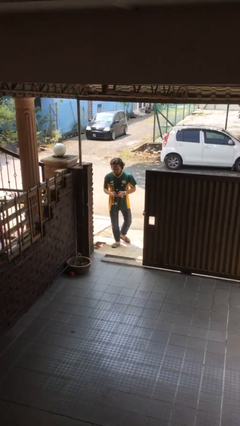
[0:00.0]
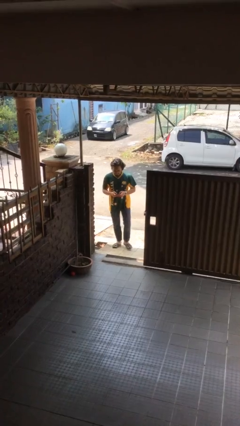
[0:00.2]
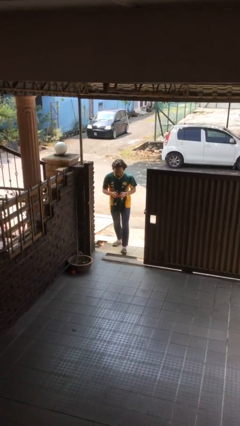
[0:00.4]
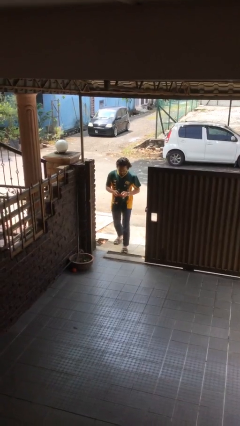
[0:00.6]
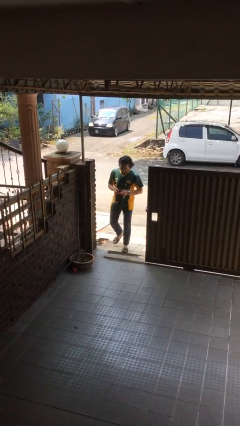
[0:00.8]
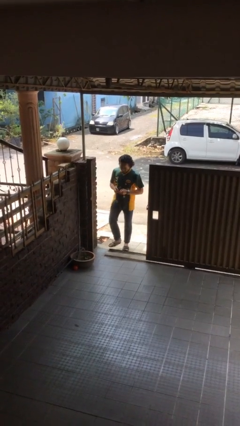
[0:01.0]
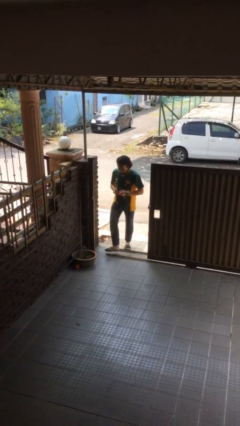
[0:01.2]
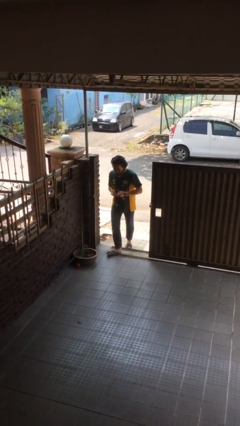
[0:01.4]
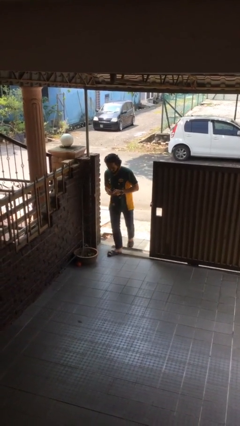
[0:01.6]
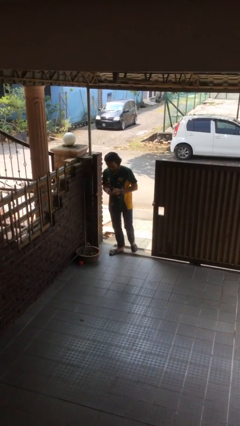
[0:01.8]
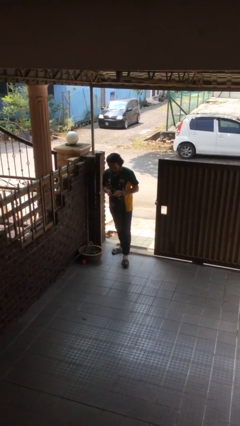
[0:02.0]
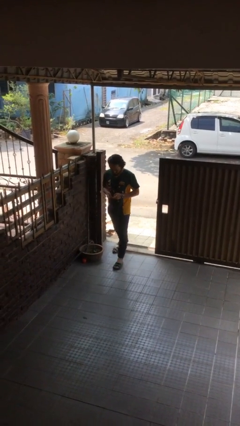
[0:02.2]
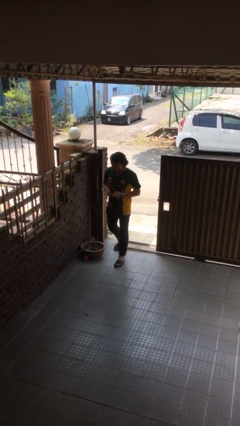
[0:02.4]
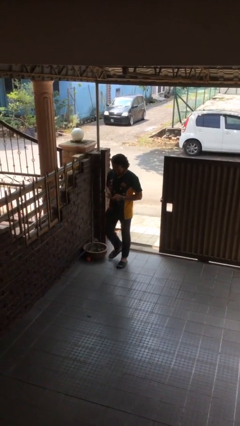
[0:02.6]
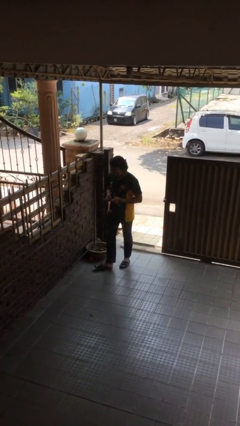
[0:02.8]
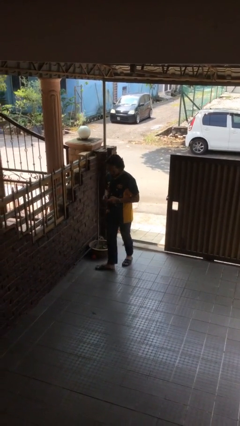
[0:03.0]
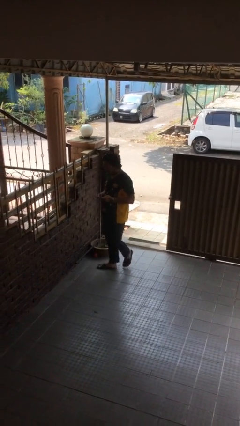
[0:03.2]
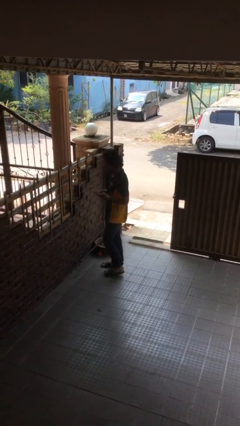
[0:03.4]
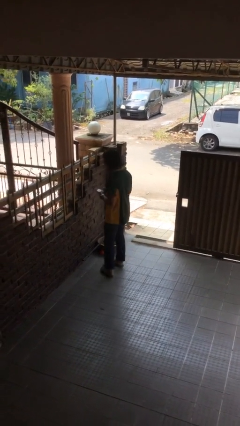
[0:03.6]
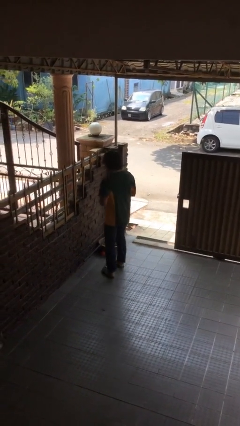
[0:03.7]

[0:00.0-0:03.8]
person enters scene through structure

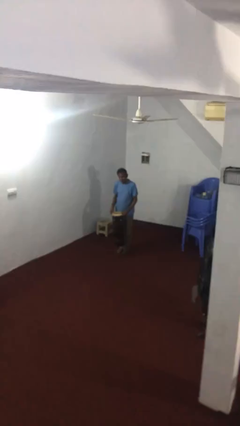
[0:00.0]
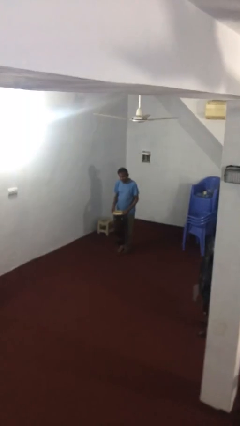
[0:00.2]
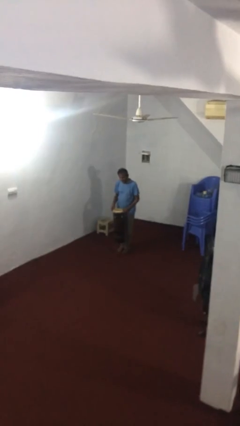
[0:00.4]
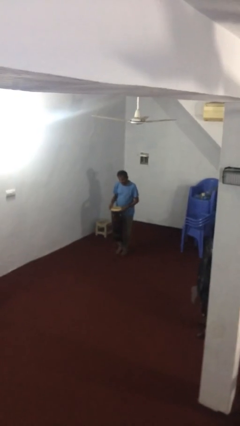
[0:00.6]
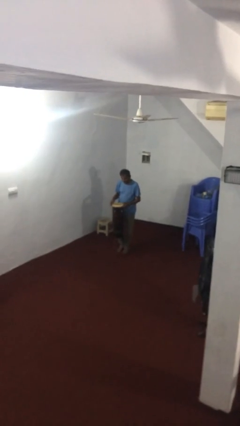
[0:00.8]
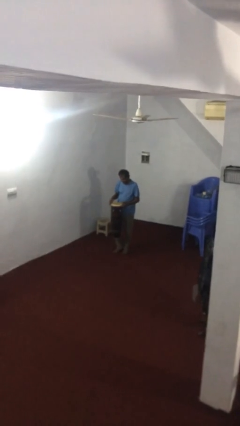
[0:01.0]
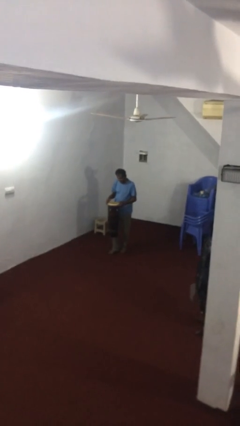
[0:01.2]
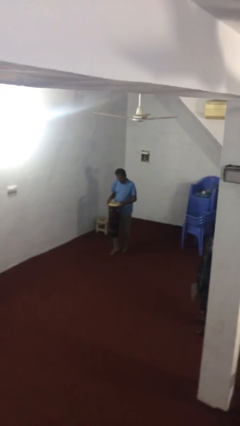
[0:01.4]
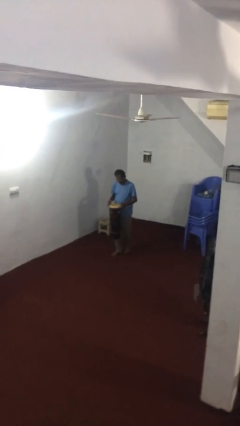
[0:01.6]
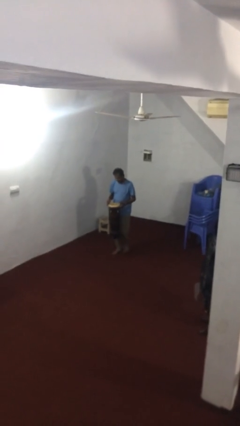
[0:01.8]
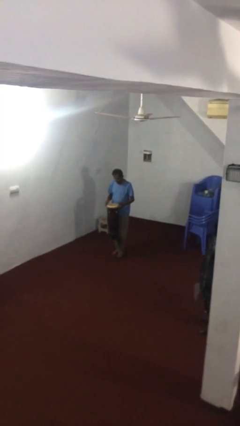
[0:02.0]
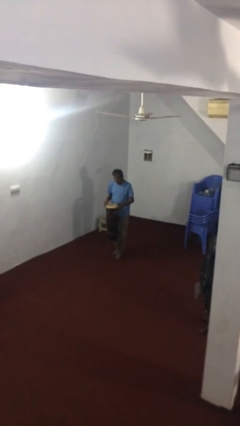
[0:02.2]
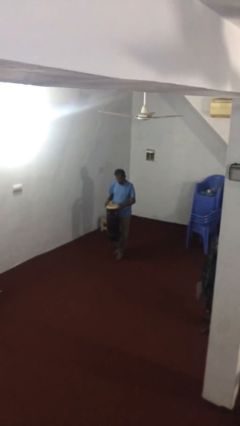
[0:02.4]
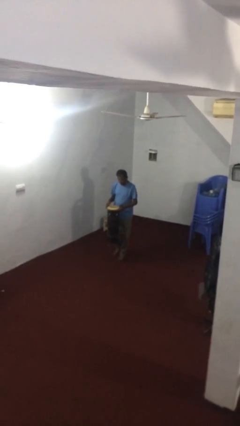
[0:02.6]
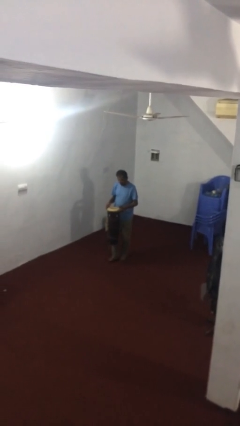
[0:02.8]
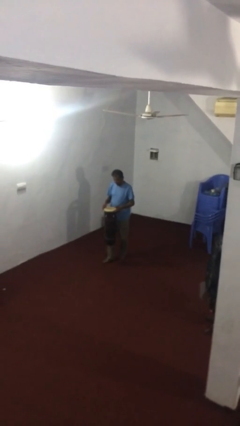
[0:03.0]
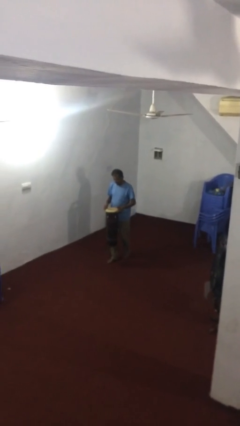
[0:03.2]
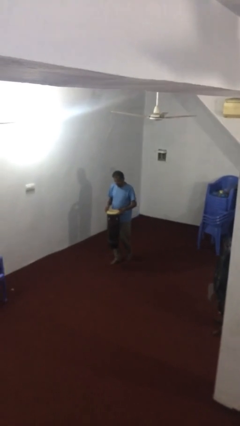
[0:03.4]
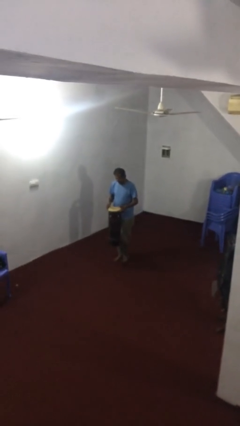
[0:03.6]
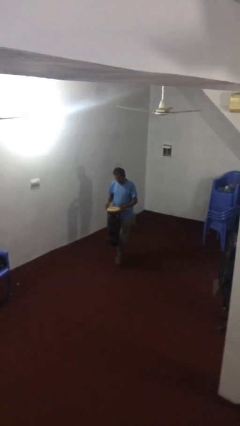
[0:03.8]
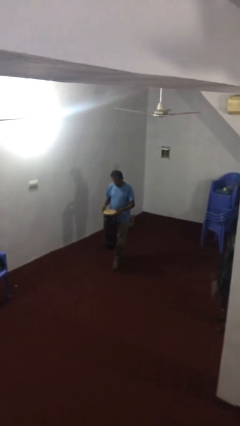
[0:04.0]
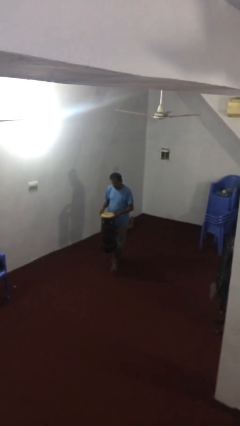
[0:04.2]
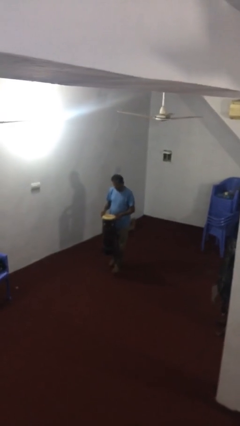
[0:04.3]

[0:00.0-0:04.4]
person carries heavy object

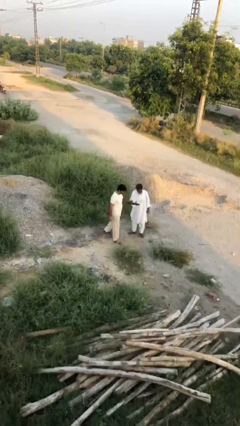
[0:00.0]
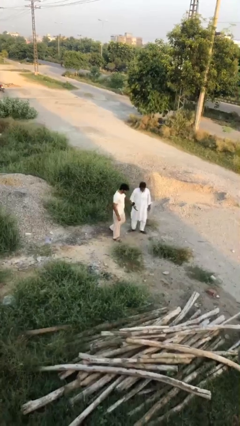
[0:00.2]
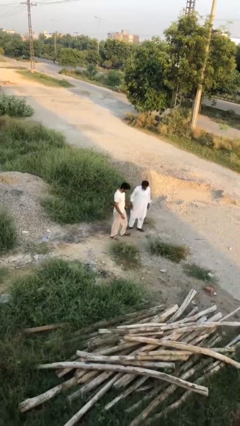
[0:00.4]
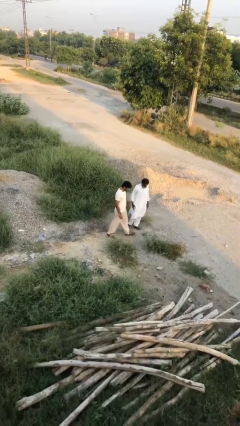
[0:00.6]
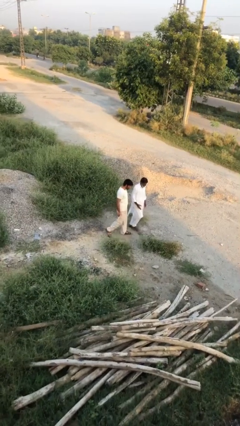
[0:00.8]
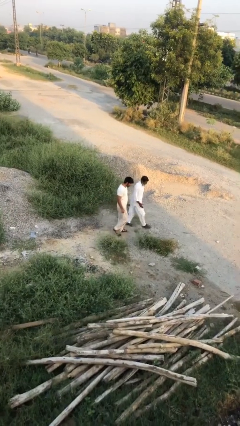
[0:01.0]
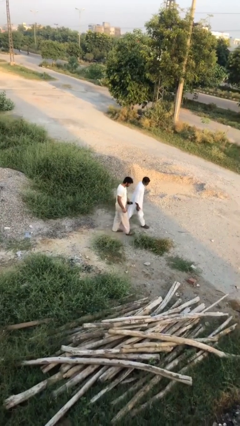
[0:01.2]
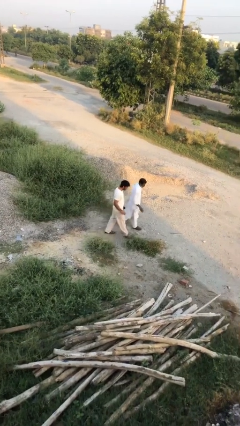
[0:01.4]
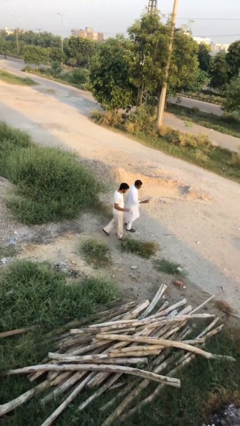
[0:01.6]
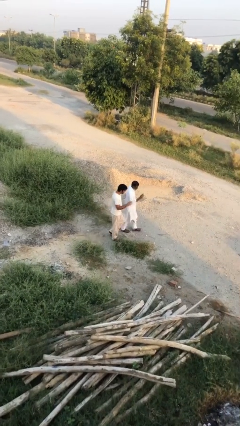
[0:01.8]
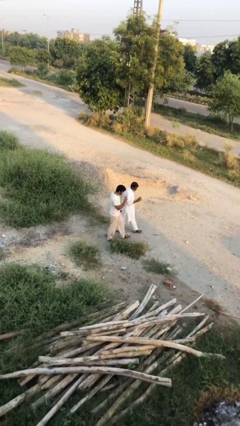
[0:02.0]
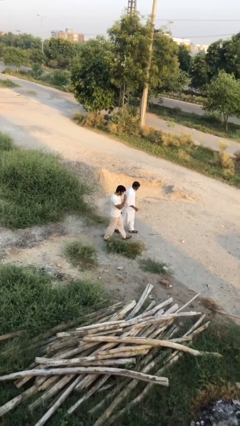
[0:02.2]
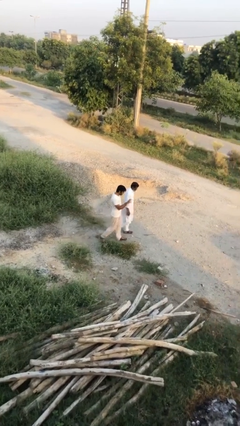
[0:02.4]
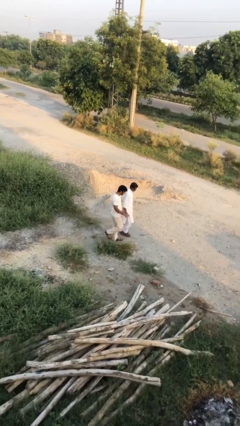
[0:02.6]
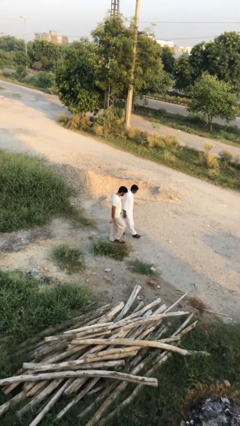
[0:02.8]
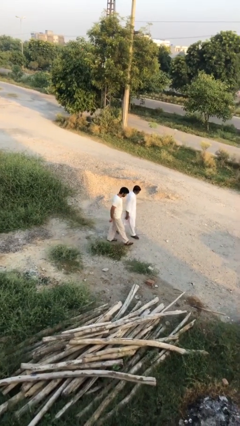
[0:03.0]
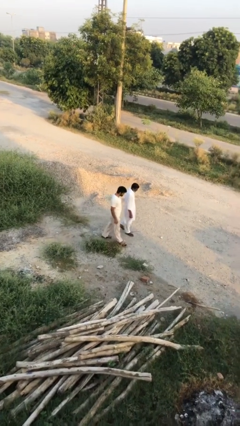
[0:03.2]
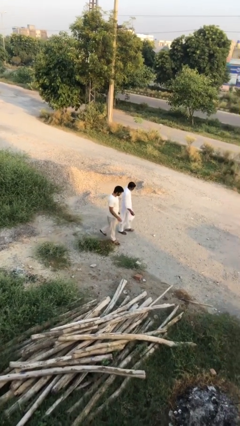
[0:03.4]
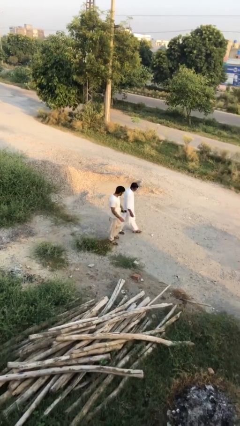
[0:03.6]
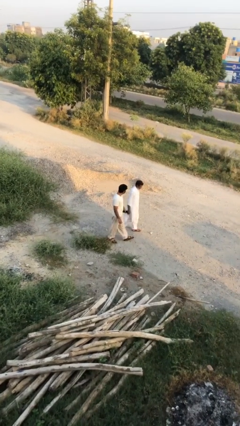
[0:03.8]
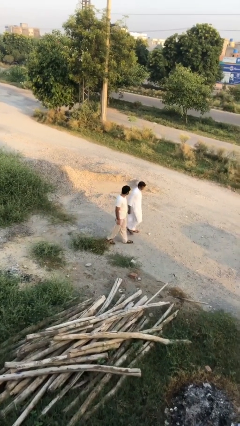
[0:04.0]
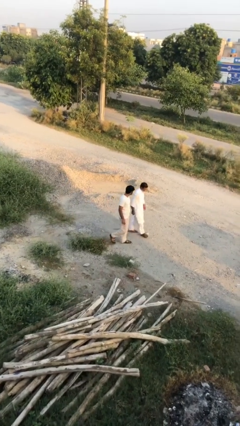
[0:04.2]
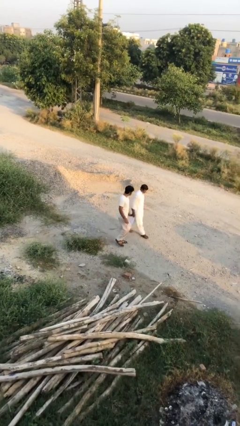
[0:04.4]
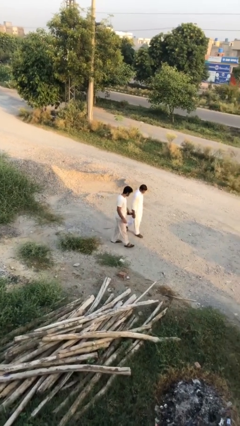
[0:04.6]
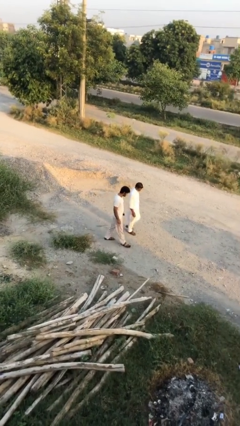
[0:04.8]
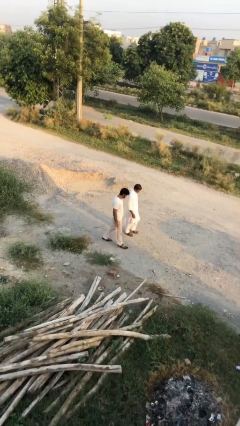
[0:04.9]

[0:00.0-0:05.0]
person talks to person

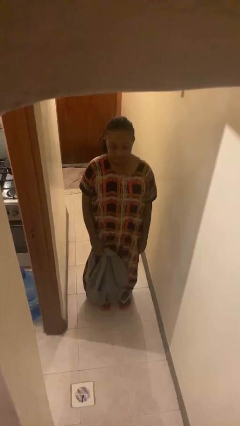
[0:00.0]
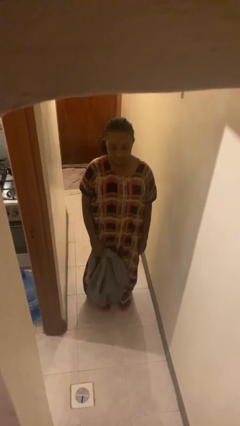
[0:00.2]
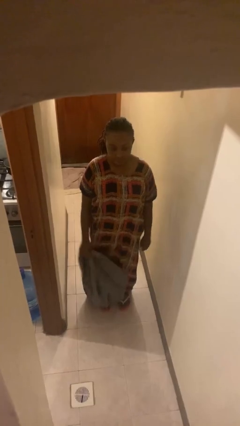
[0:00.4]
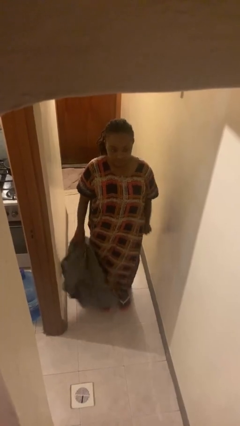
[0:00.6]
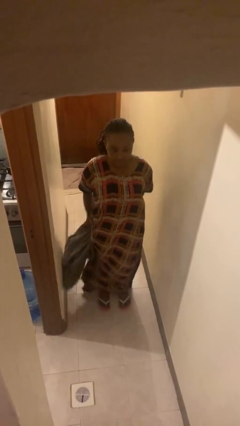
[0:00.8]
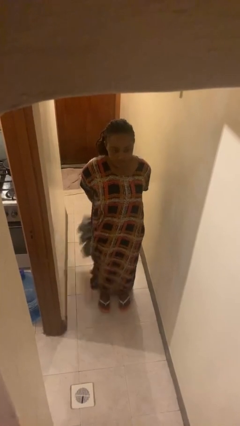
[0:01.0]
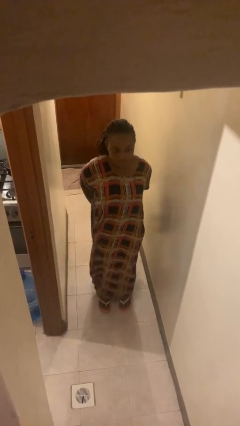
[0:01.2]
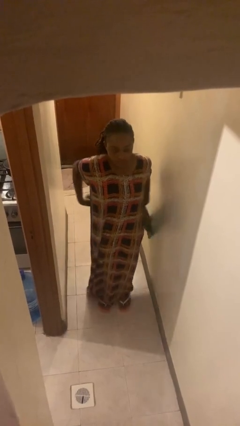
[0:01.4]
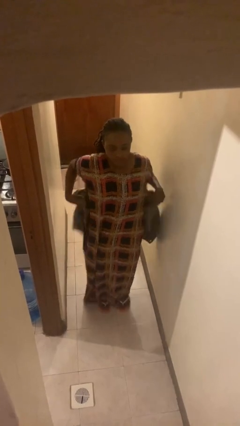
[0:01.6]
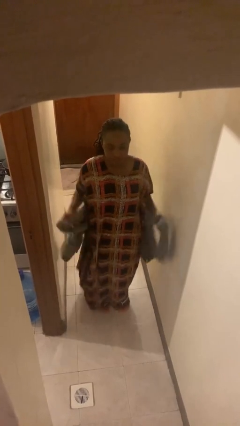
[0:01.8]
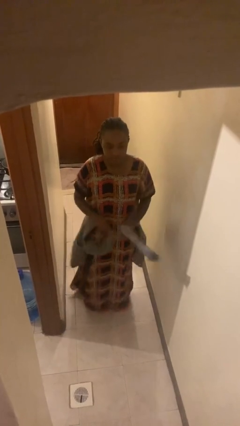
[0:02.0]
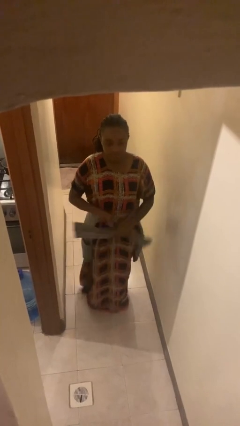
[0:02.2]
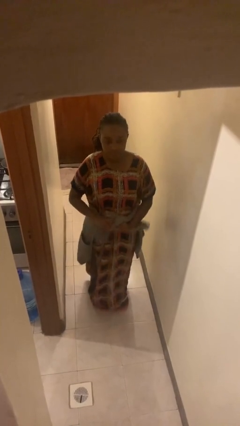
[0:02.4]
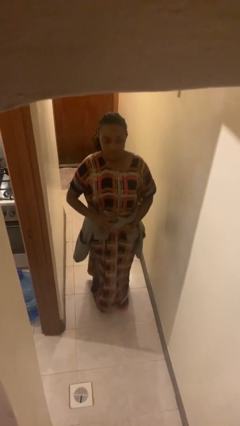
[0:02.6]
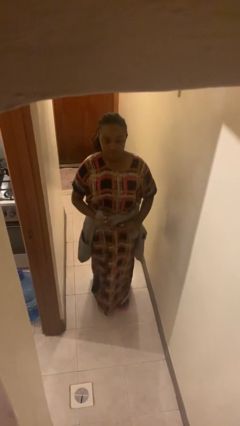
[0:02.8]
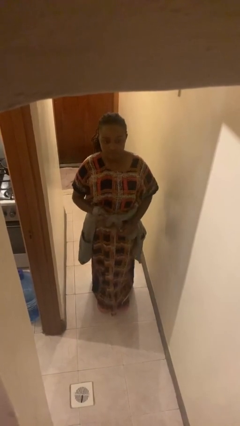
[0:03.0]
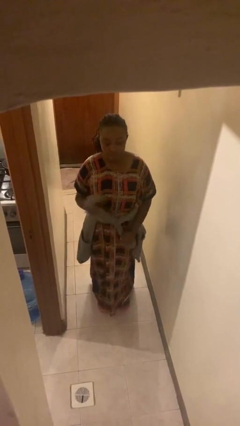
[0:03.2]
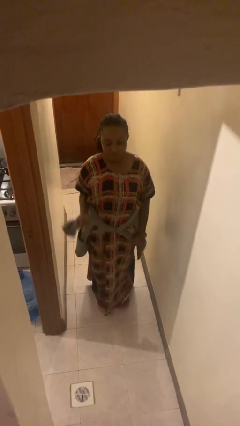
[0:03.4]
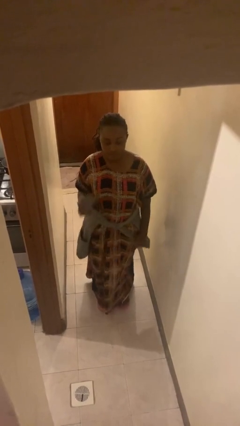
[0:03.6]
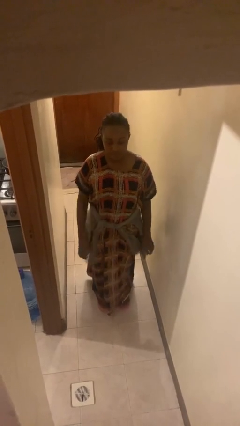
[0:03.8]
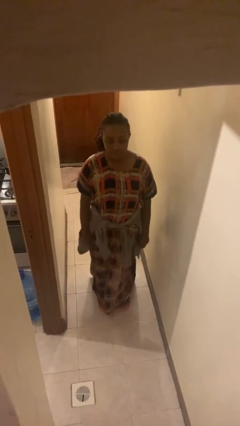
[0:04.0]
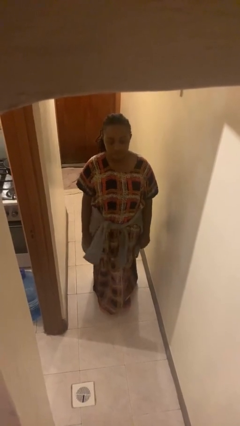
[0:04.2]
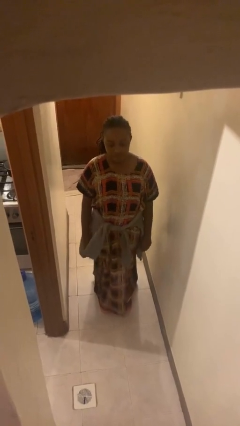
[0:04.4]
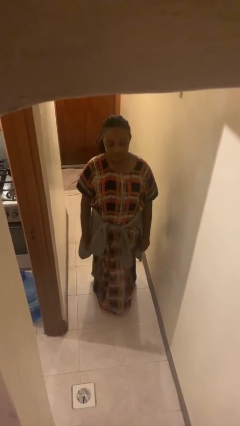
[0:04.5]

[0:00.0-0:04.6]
person ties jacket around waist
